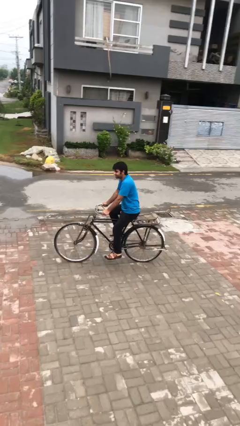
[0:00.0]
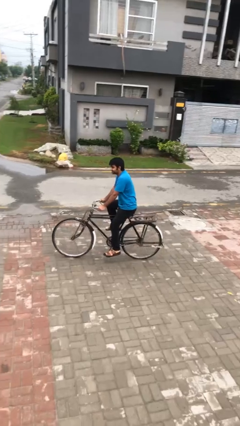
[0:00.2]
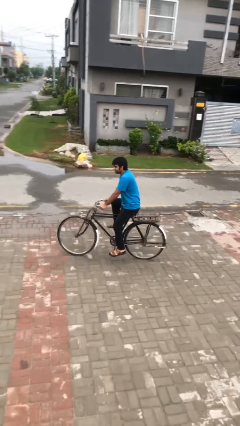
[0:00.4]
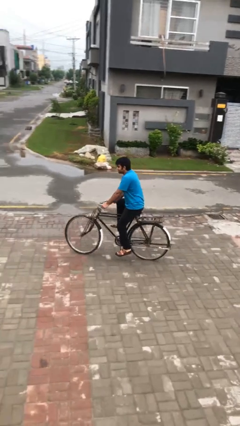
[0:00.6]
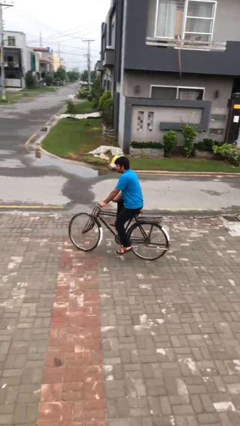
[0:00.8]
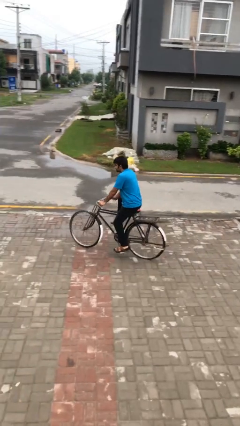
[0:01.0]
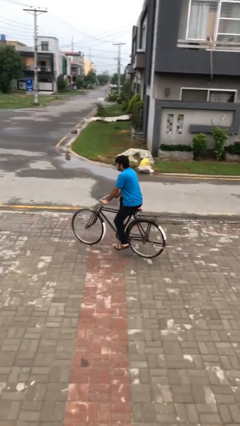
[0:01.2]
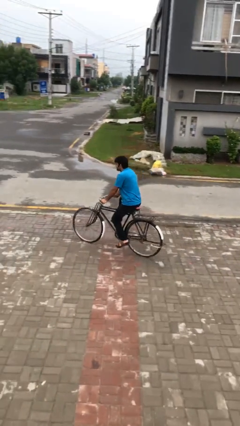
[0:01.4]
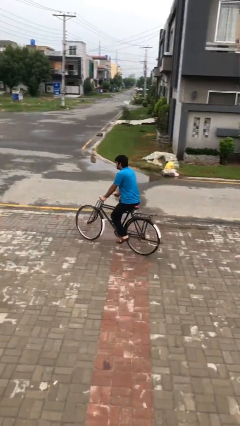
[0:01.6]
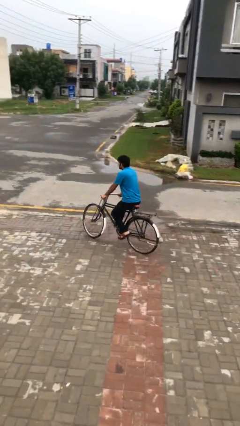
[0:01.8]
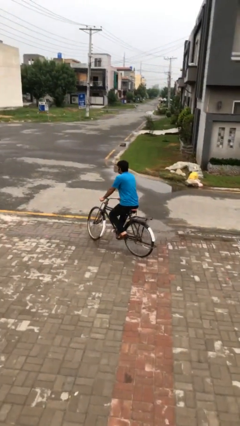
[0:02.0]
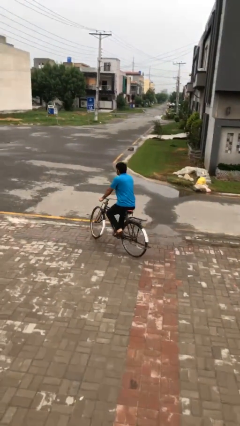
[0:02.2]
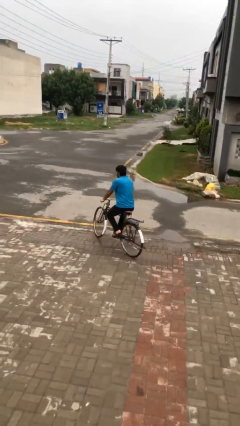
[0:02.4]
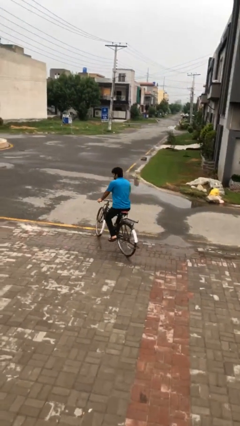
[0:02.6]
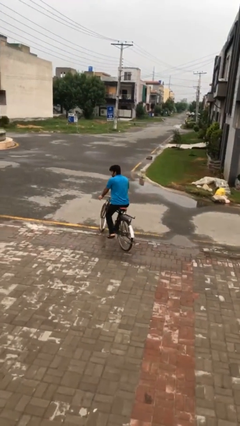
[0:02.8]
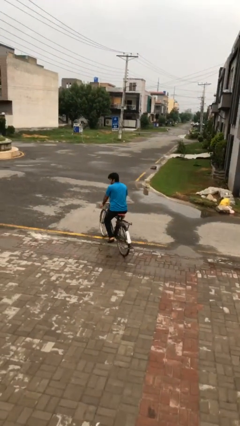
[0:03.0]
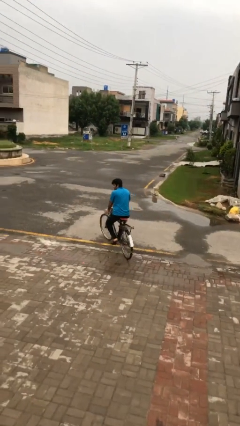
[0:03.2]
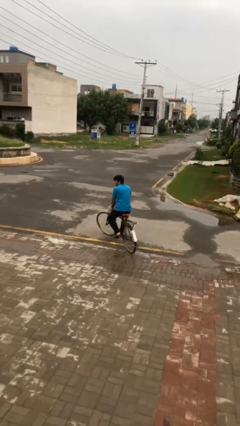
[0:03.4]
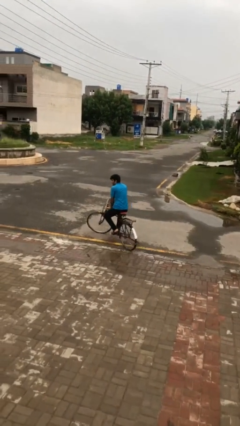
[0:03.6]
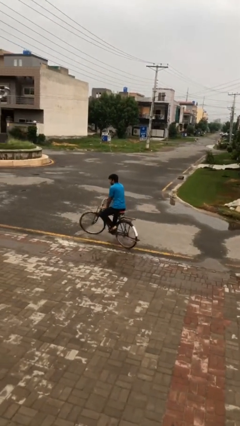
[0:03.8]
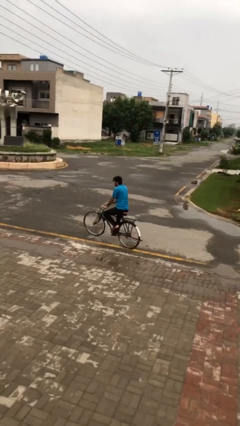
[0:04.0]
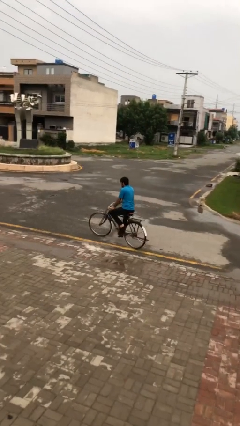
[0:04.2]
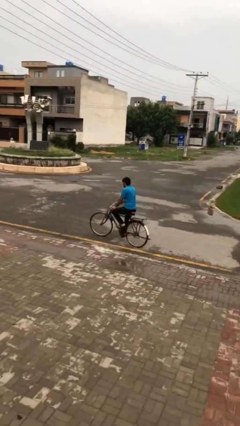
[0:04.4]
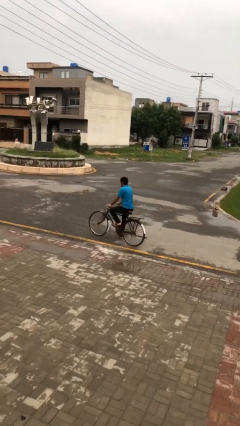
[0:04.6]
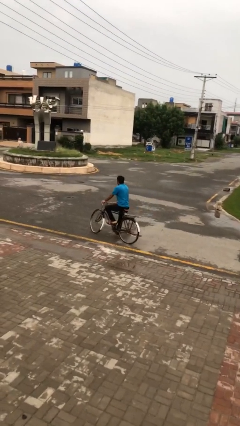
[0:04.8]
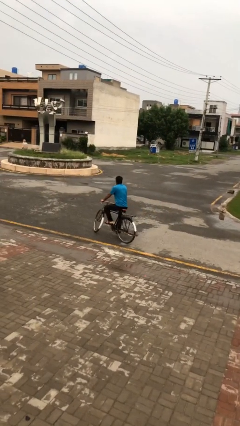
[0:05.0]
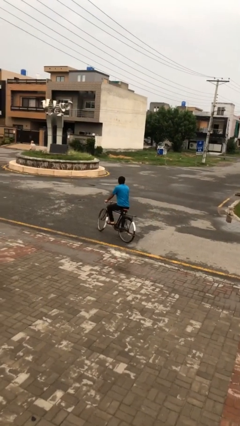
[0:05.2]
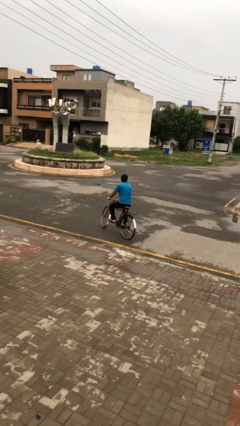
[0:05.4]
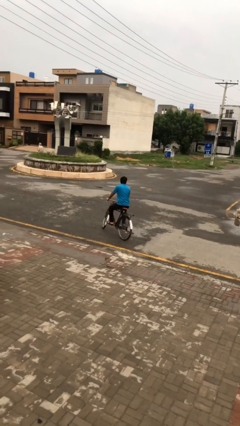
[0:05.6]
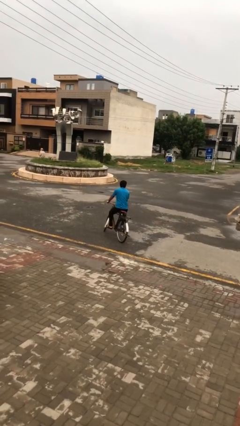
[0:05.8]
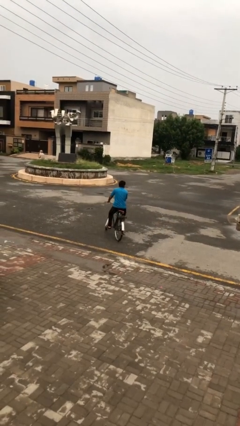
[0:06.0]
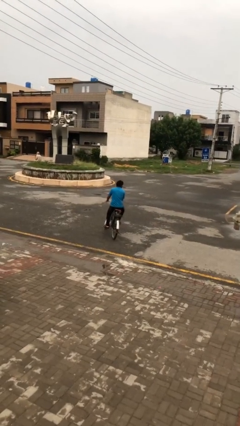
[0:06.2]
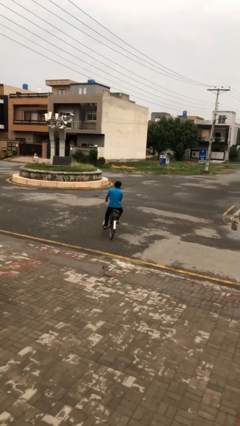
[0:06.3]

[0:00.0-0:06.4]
person rides bicycle

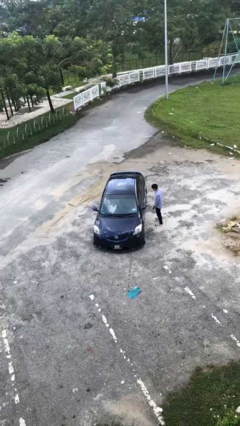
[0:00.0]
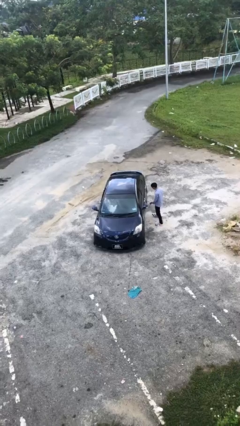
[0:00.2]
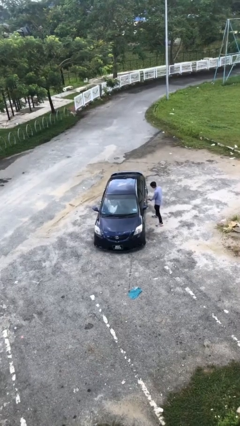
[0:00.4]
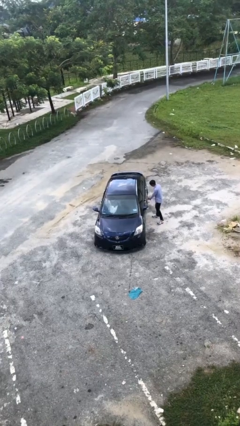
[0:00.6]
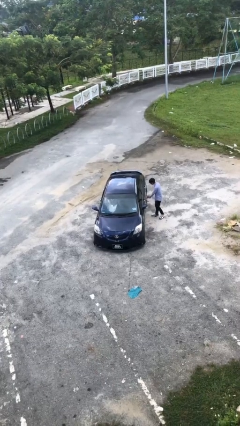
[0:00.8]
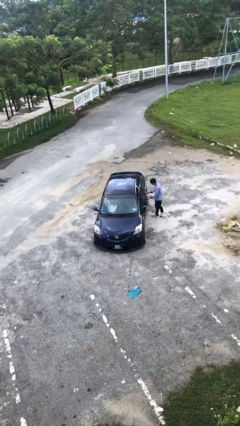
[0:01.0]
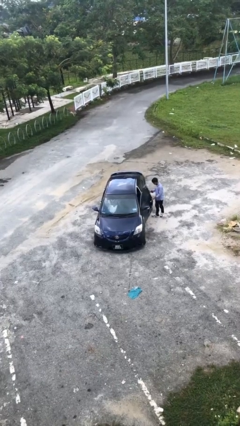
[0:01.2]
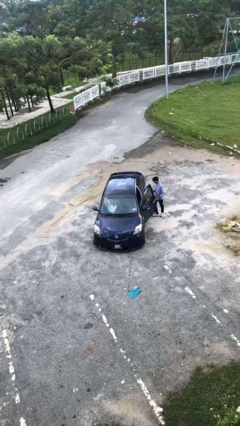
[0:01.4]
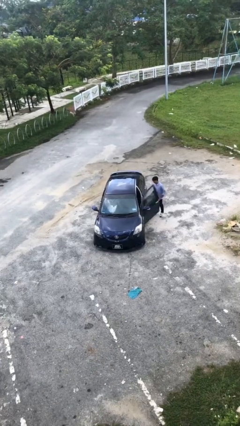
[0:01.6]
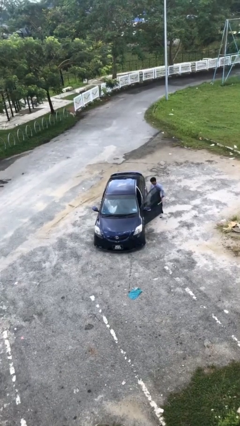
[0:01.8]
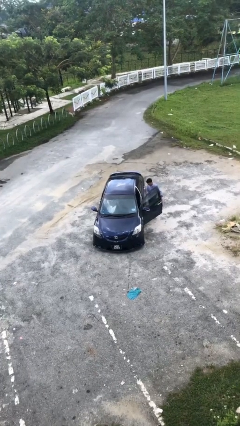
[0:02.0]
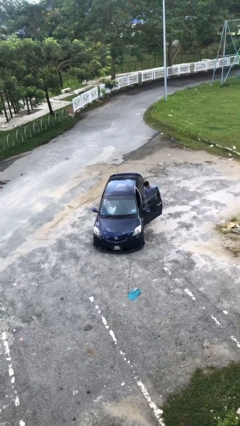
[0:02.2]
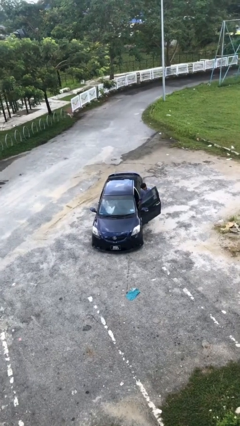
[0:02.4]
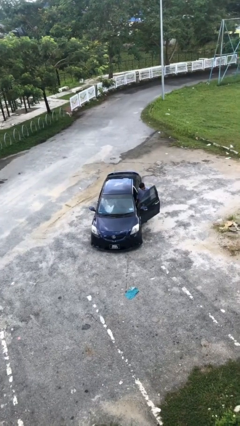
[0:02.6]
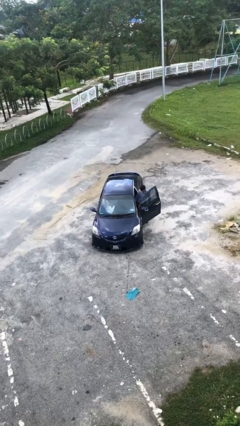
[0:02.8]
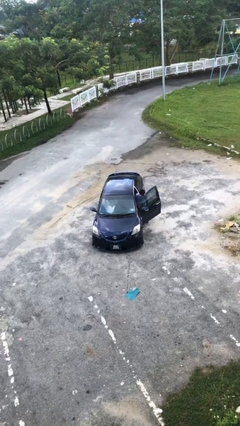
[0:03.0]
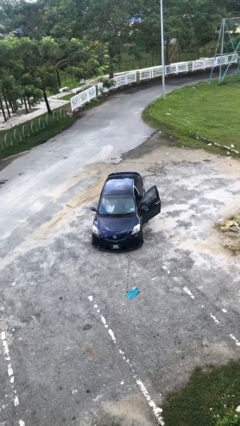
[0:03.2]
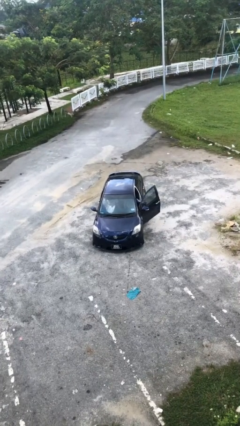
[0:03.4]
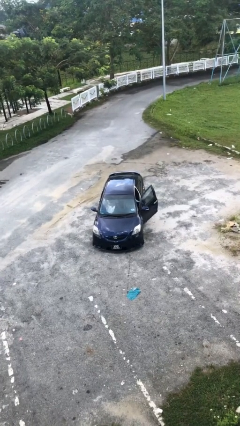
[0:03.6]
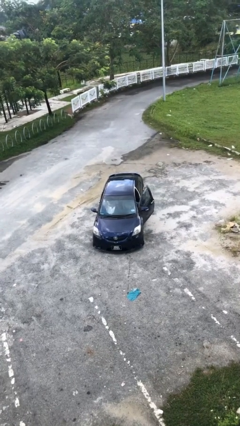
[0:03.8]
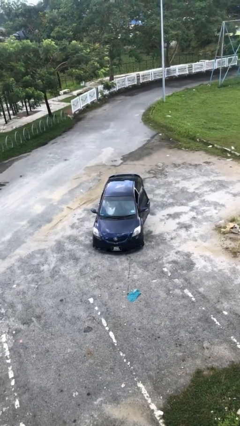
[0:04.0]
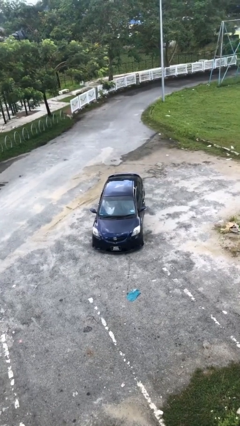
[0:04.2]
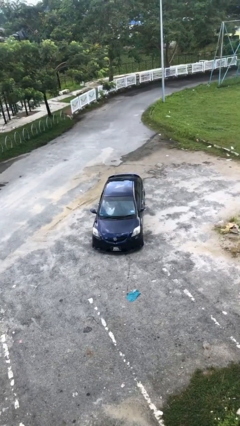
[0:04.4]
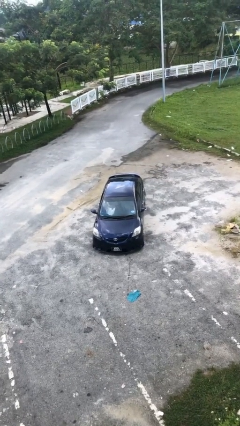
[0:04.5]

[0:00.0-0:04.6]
car picks up person

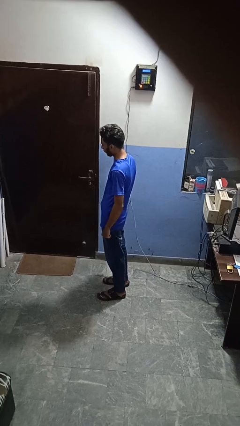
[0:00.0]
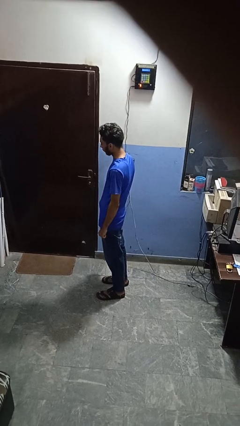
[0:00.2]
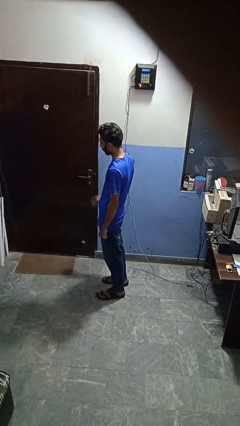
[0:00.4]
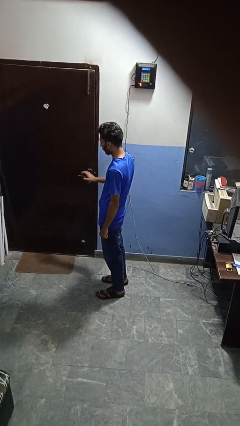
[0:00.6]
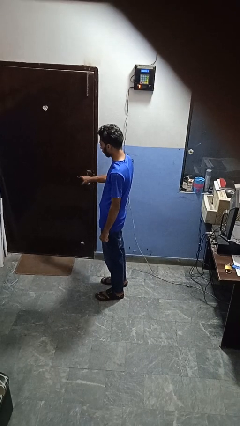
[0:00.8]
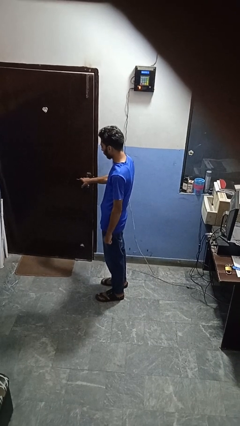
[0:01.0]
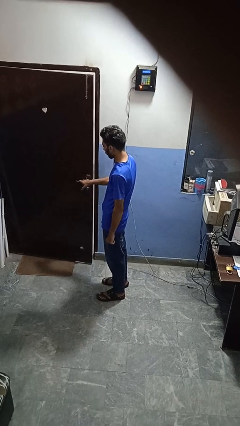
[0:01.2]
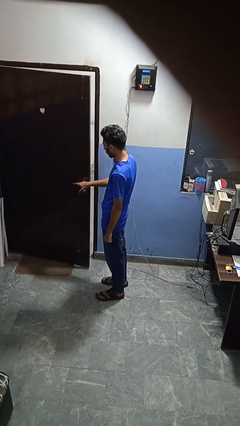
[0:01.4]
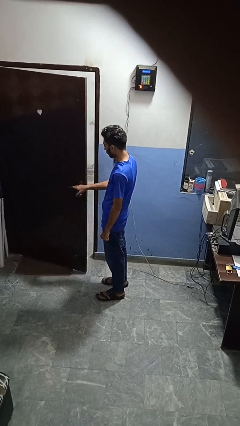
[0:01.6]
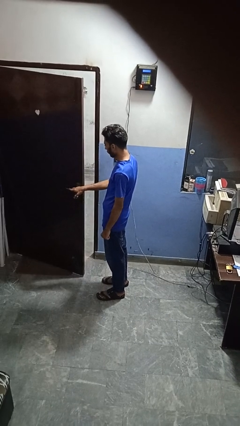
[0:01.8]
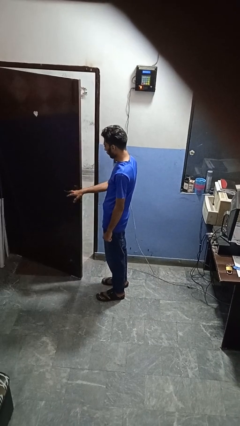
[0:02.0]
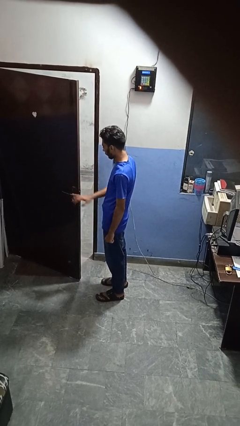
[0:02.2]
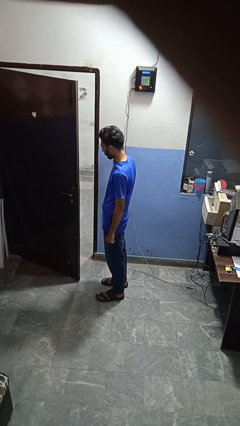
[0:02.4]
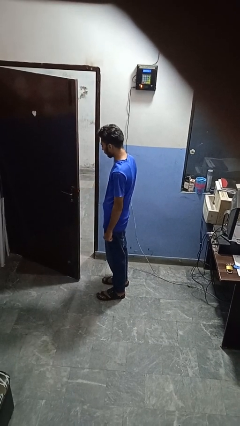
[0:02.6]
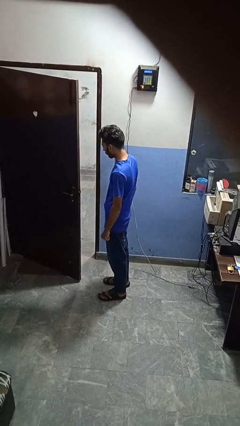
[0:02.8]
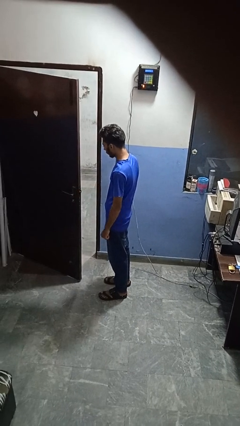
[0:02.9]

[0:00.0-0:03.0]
person opens facility door

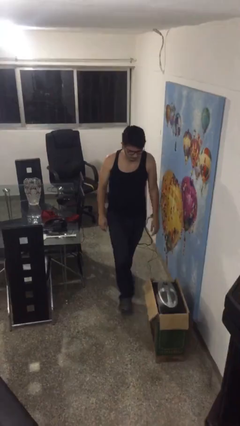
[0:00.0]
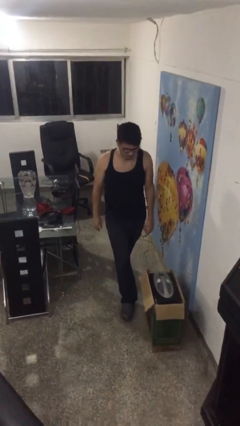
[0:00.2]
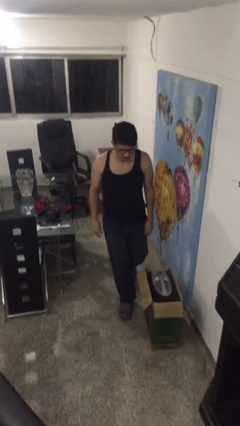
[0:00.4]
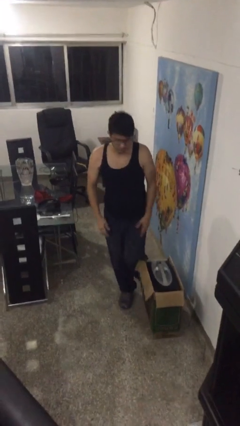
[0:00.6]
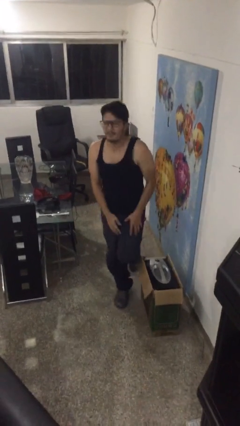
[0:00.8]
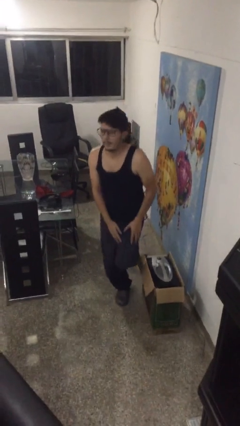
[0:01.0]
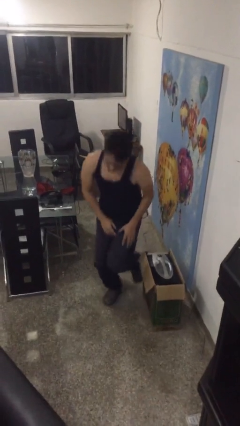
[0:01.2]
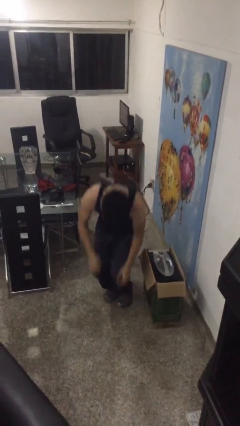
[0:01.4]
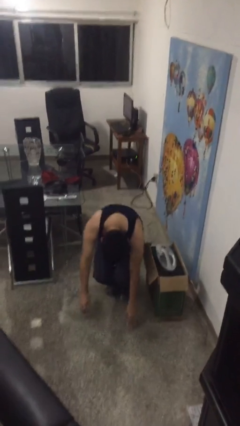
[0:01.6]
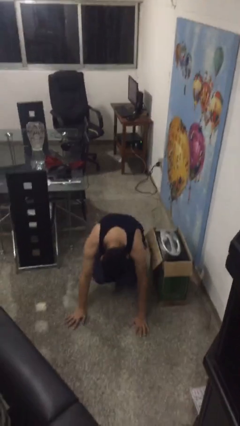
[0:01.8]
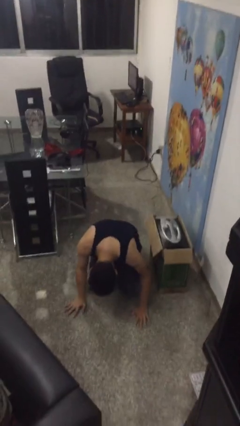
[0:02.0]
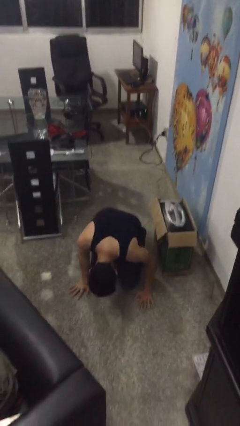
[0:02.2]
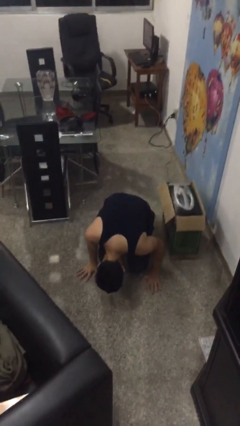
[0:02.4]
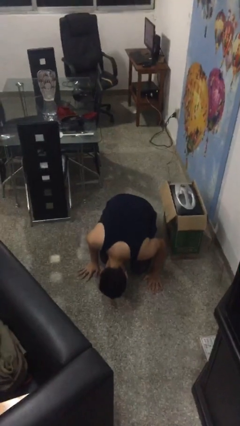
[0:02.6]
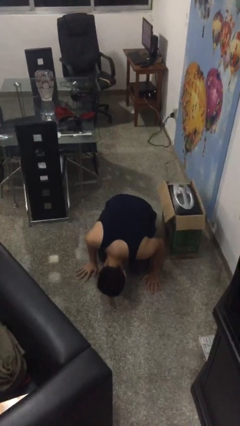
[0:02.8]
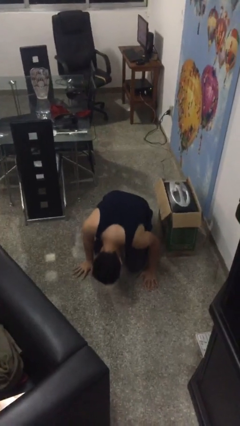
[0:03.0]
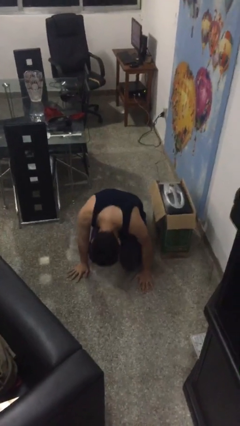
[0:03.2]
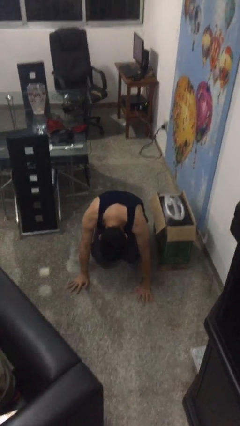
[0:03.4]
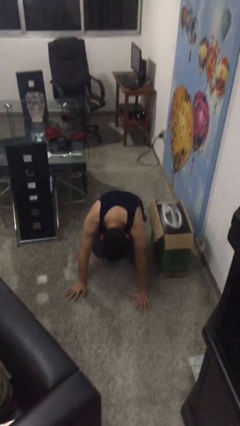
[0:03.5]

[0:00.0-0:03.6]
person trips on object on floor
